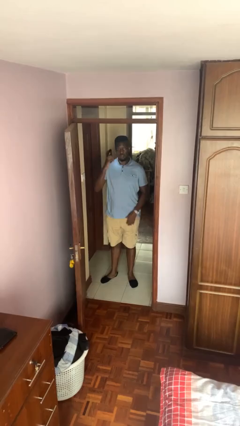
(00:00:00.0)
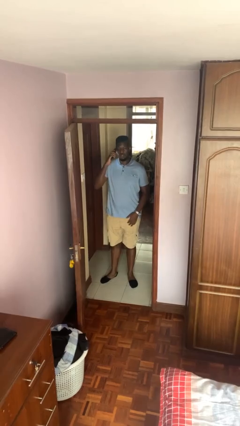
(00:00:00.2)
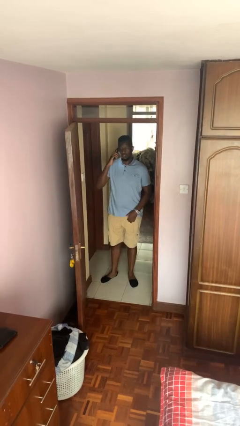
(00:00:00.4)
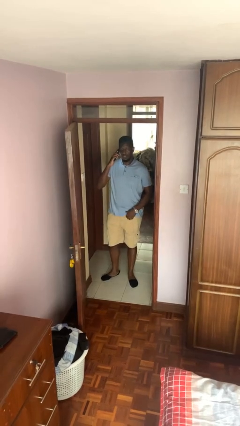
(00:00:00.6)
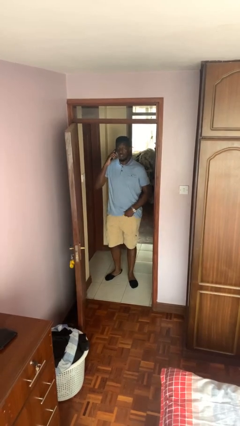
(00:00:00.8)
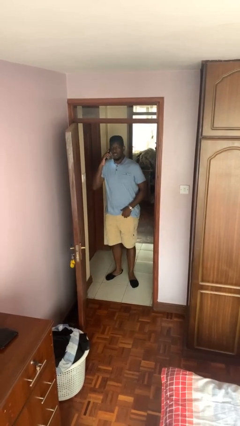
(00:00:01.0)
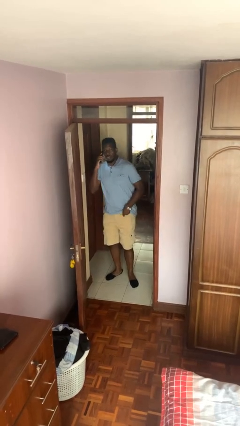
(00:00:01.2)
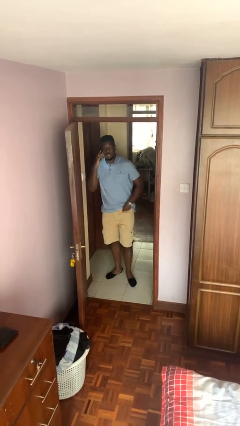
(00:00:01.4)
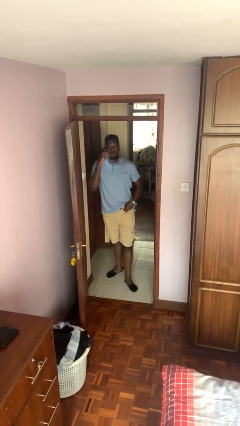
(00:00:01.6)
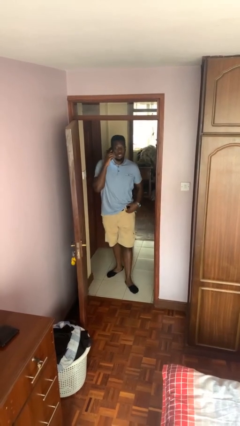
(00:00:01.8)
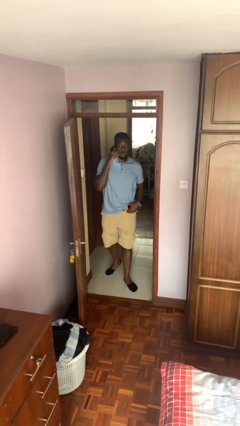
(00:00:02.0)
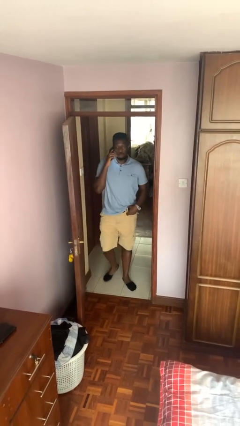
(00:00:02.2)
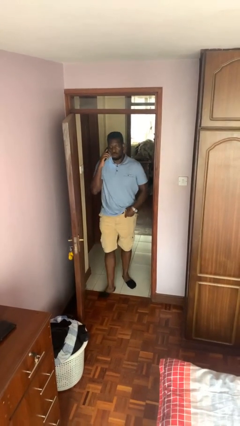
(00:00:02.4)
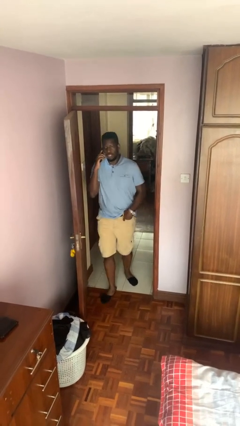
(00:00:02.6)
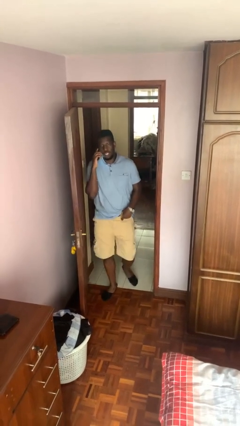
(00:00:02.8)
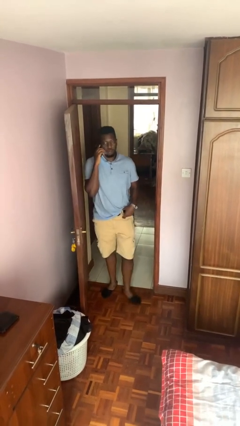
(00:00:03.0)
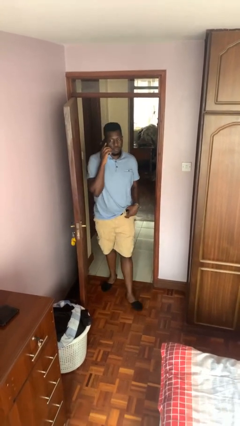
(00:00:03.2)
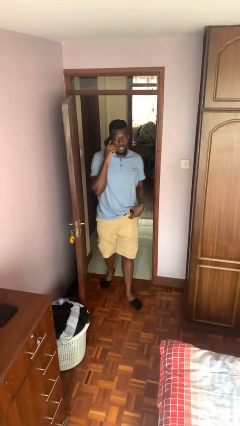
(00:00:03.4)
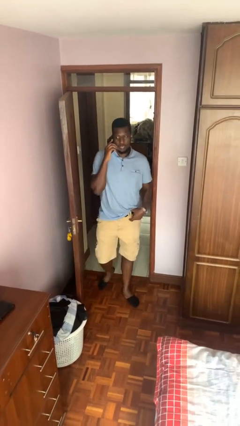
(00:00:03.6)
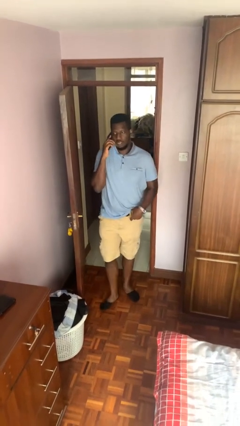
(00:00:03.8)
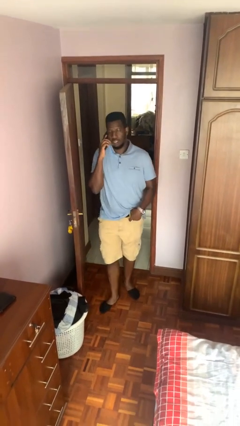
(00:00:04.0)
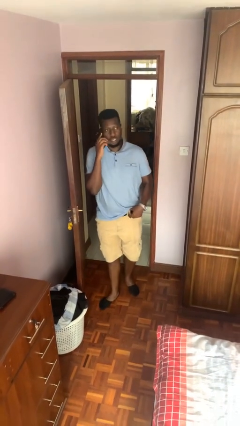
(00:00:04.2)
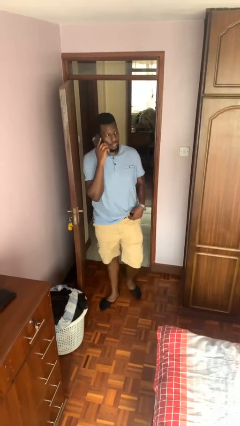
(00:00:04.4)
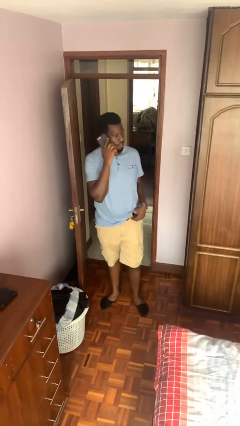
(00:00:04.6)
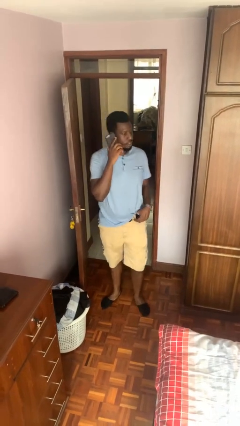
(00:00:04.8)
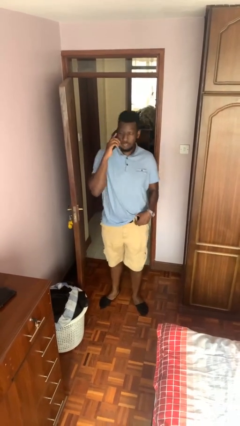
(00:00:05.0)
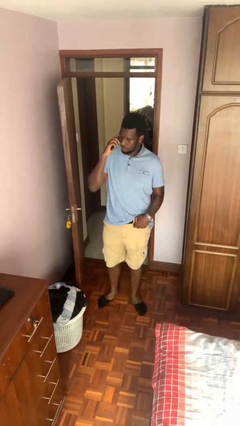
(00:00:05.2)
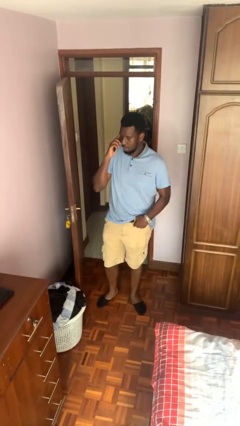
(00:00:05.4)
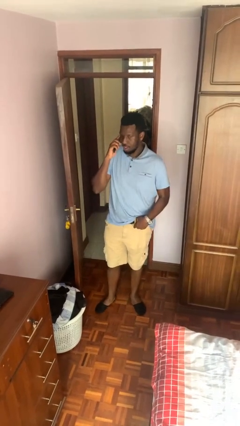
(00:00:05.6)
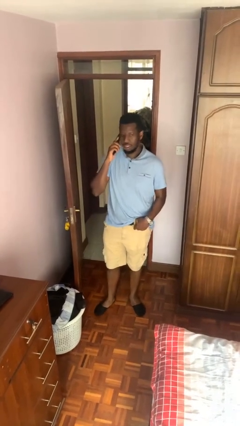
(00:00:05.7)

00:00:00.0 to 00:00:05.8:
person enters scene through structure

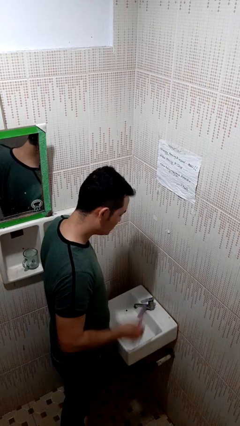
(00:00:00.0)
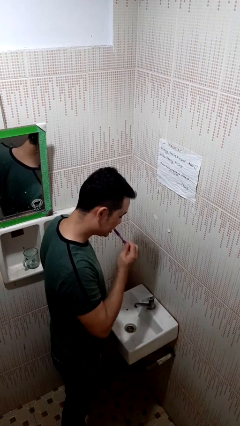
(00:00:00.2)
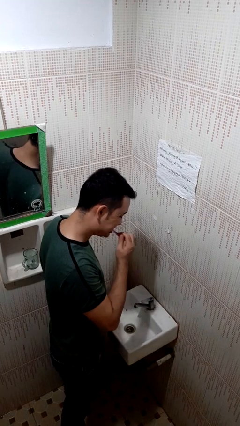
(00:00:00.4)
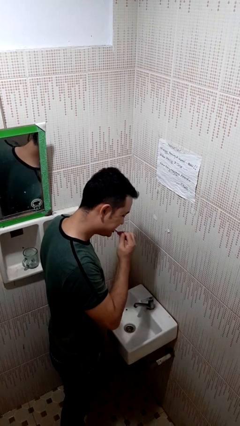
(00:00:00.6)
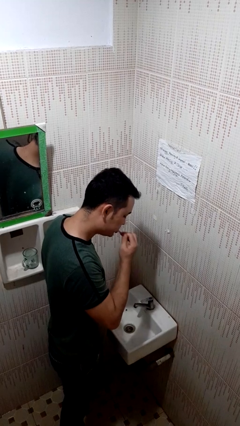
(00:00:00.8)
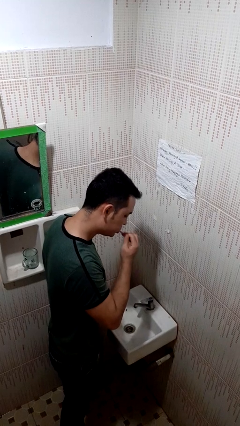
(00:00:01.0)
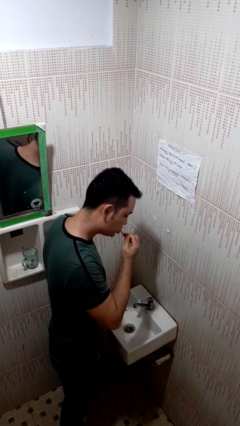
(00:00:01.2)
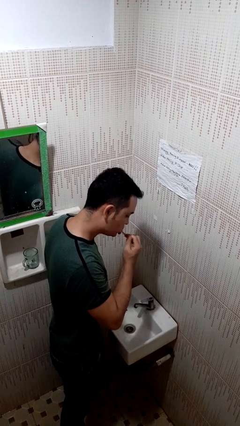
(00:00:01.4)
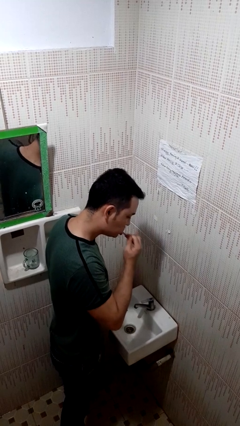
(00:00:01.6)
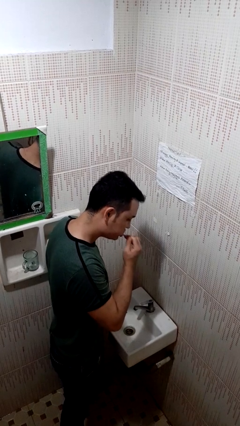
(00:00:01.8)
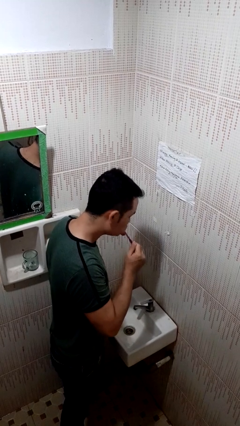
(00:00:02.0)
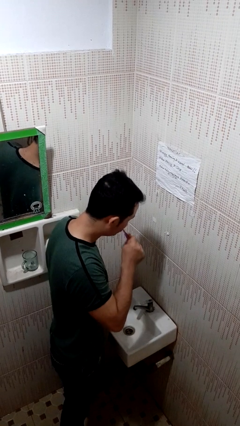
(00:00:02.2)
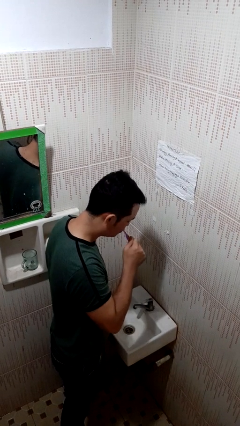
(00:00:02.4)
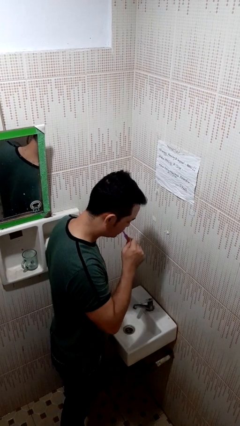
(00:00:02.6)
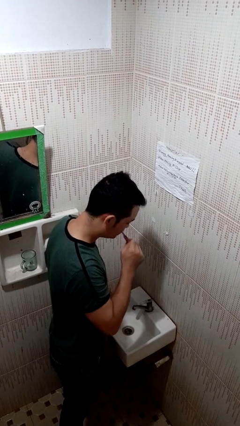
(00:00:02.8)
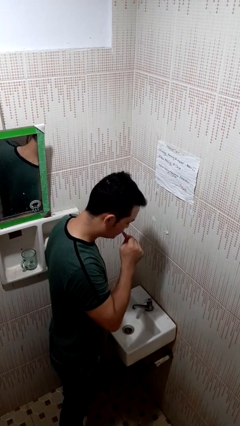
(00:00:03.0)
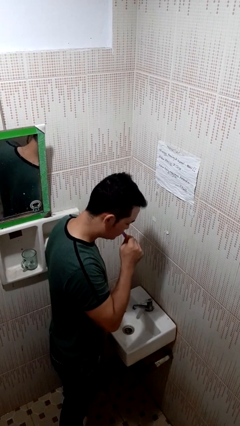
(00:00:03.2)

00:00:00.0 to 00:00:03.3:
person brushes teeth

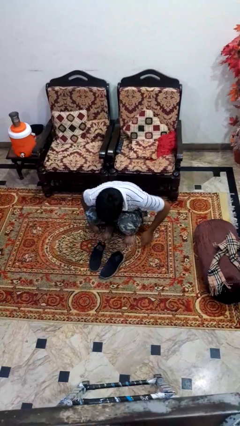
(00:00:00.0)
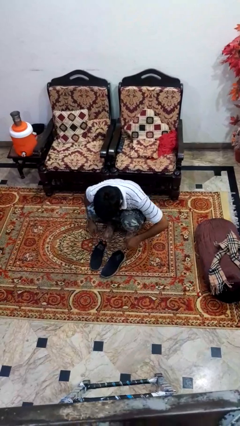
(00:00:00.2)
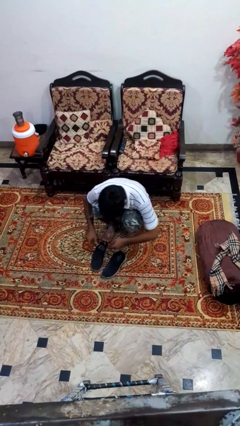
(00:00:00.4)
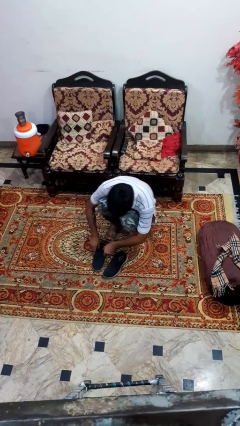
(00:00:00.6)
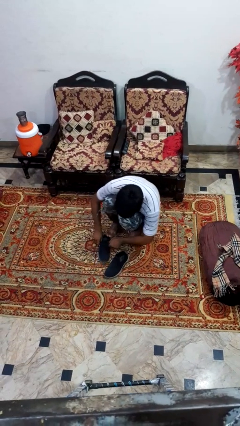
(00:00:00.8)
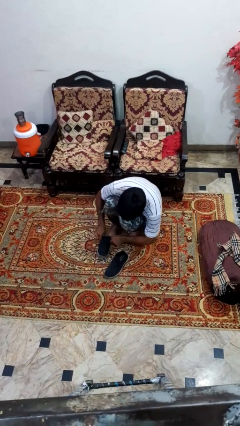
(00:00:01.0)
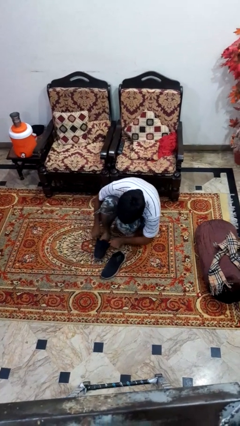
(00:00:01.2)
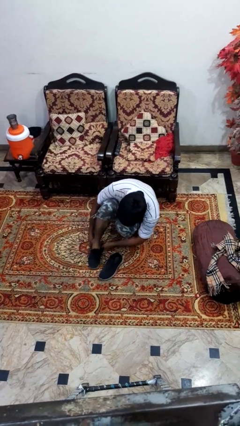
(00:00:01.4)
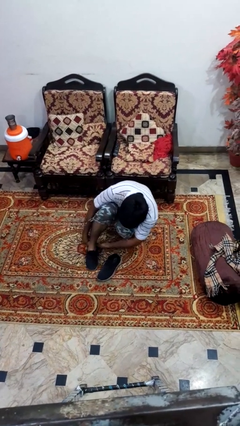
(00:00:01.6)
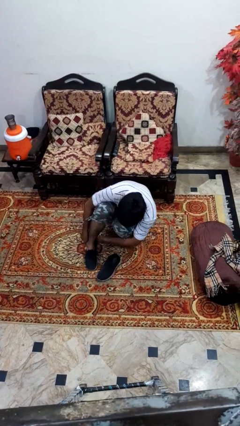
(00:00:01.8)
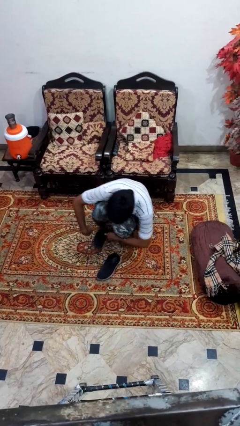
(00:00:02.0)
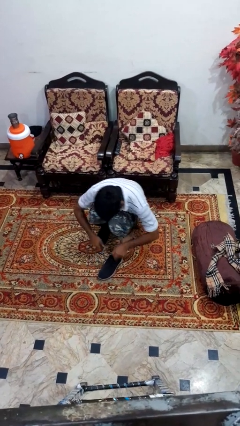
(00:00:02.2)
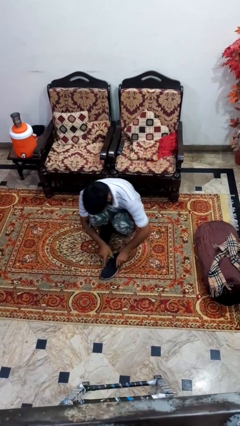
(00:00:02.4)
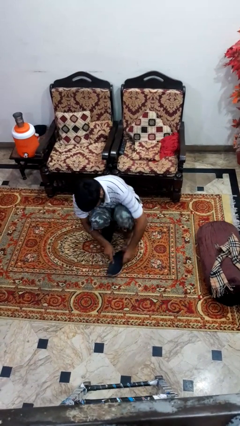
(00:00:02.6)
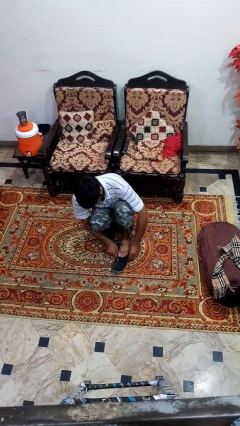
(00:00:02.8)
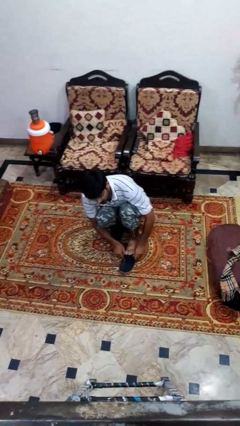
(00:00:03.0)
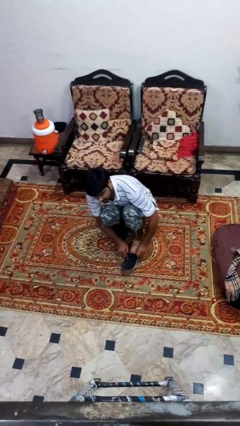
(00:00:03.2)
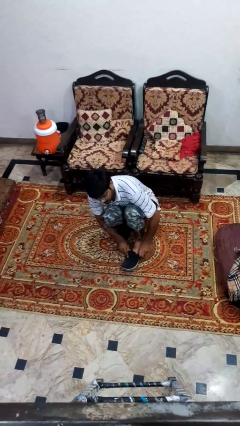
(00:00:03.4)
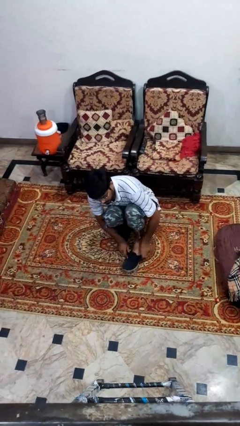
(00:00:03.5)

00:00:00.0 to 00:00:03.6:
person puts on shoes

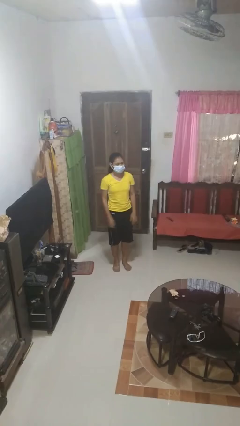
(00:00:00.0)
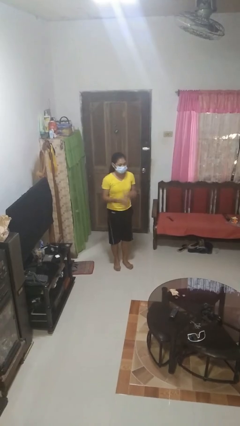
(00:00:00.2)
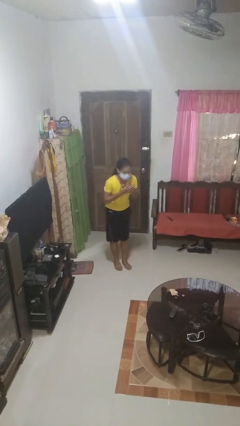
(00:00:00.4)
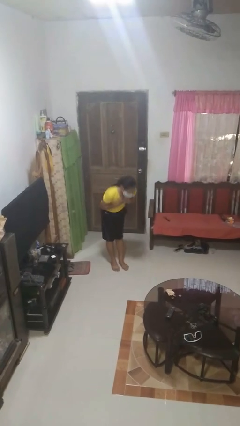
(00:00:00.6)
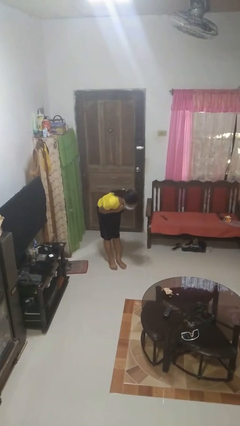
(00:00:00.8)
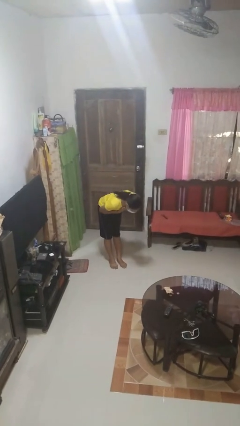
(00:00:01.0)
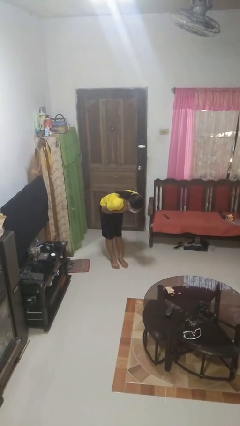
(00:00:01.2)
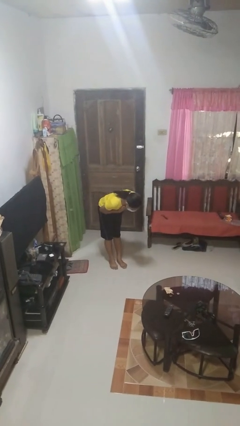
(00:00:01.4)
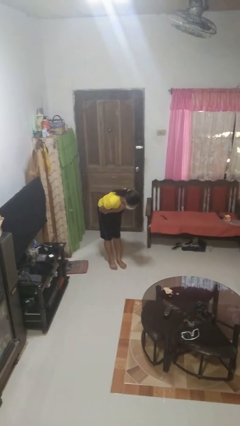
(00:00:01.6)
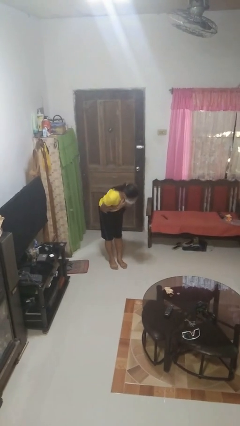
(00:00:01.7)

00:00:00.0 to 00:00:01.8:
person bows

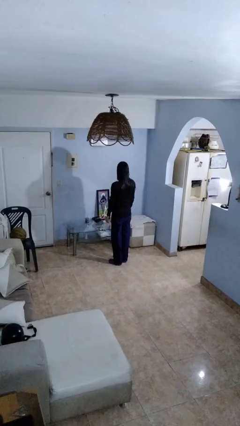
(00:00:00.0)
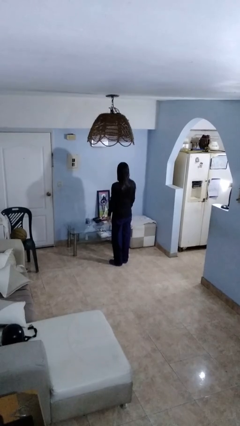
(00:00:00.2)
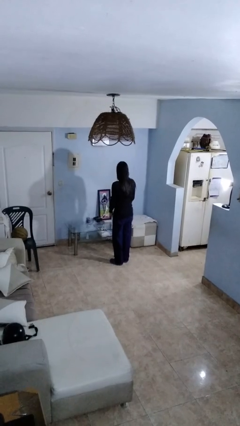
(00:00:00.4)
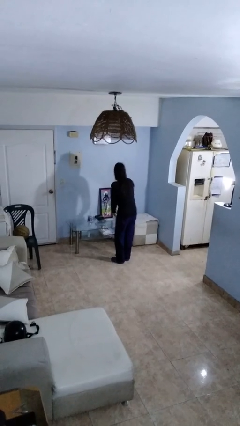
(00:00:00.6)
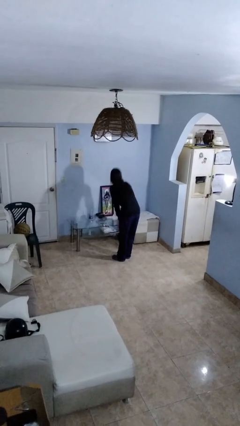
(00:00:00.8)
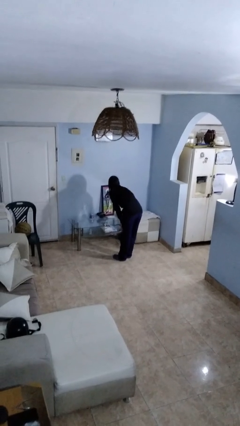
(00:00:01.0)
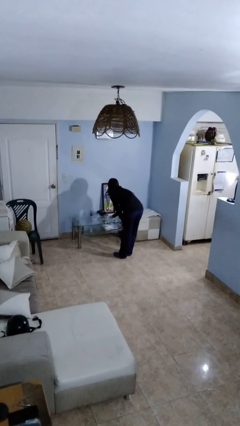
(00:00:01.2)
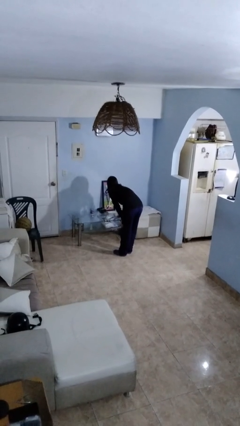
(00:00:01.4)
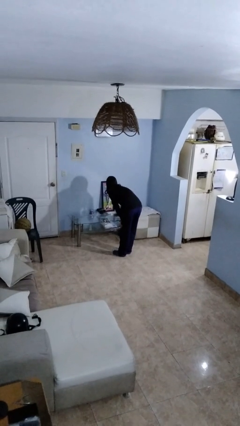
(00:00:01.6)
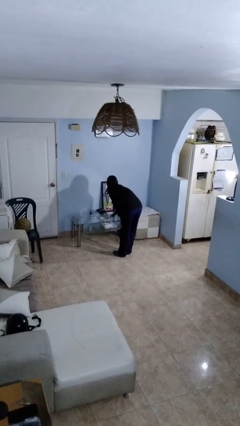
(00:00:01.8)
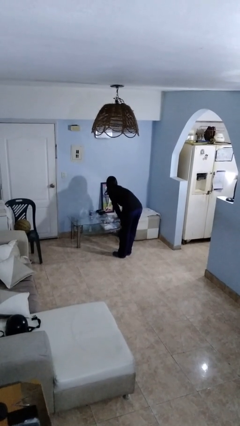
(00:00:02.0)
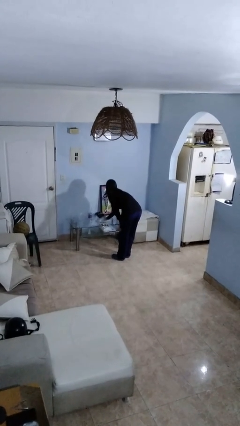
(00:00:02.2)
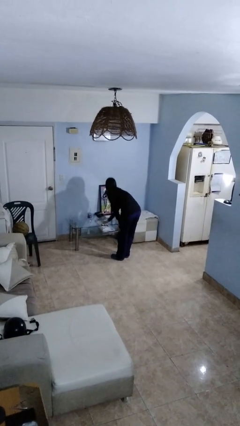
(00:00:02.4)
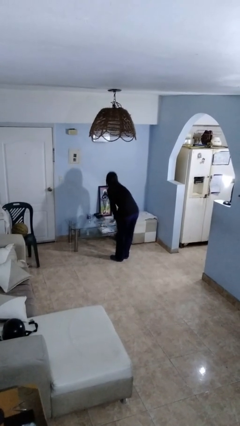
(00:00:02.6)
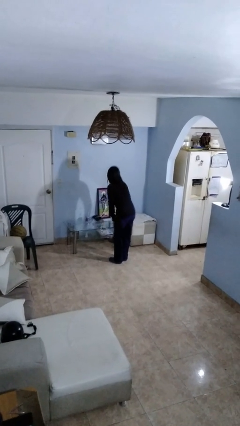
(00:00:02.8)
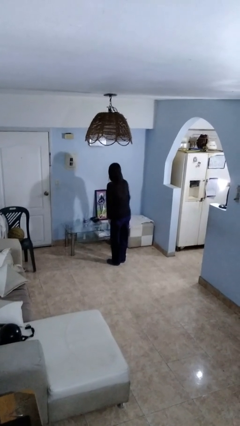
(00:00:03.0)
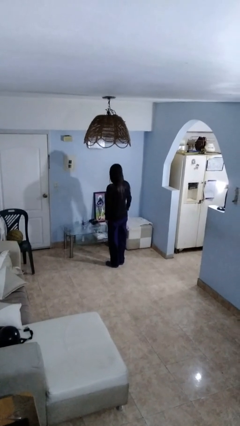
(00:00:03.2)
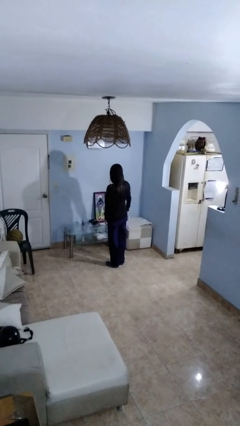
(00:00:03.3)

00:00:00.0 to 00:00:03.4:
person cleans table with rag
